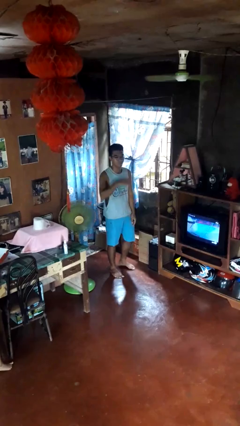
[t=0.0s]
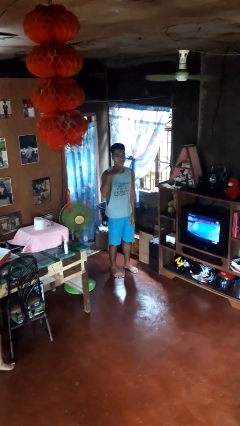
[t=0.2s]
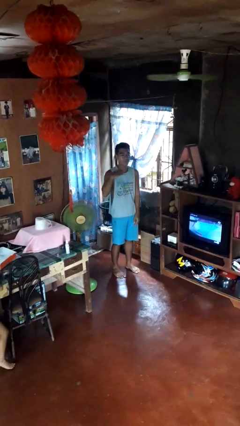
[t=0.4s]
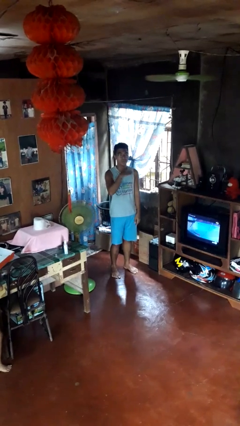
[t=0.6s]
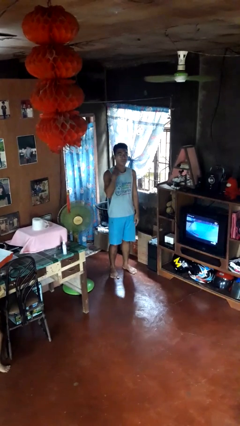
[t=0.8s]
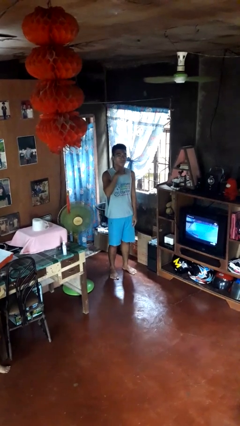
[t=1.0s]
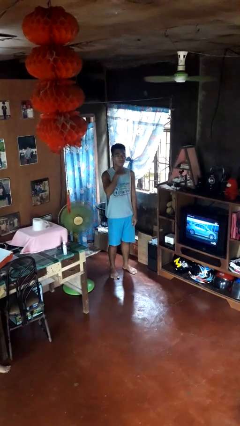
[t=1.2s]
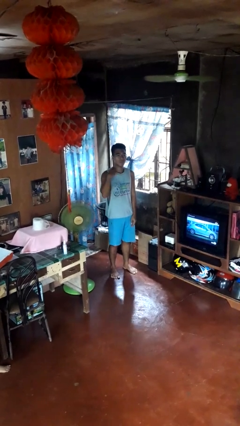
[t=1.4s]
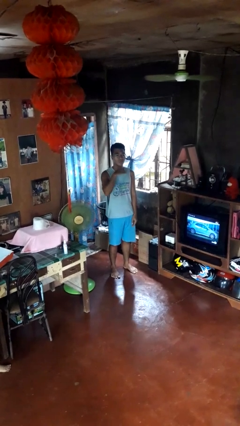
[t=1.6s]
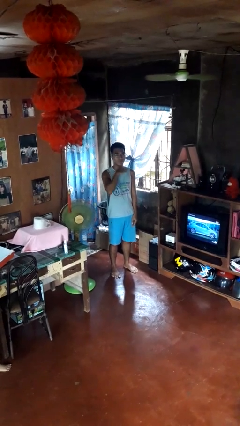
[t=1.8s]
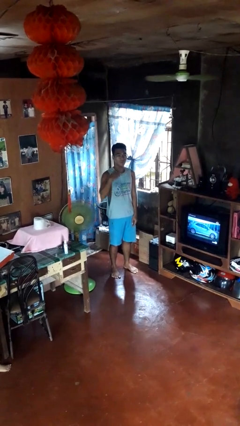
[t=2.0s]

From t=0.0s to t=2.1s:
person gestures cut

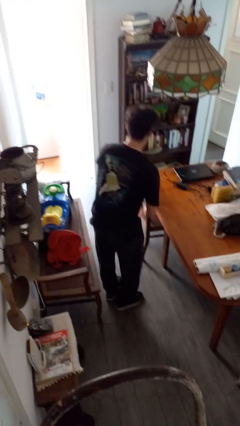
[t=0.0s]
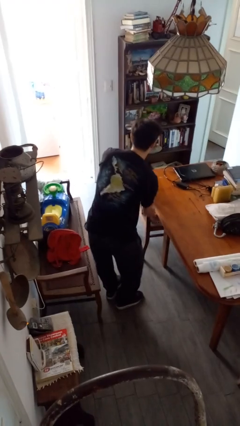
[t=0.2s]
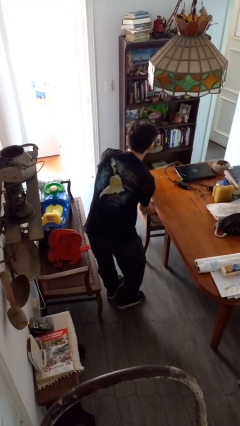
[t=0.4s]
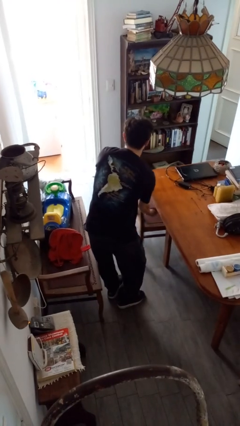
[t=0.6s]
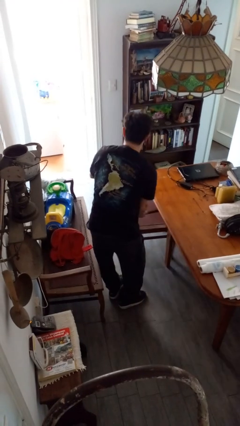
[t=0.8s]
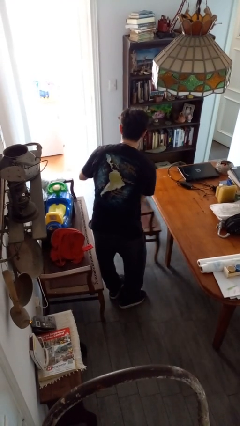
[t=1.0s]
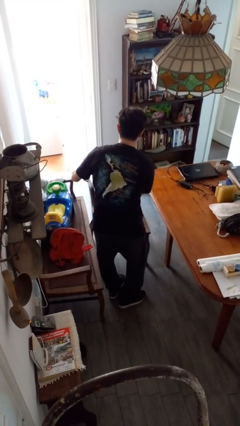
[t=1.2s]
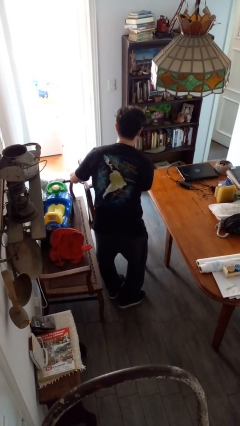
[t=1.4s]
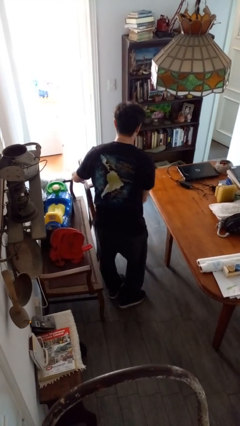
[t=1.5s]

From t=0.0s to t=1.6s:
person pulls out chair

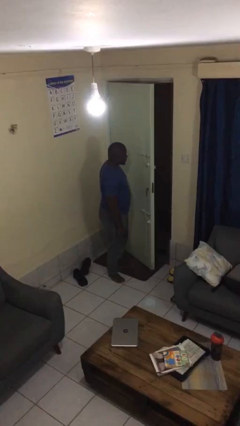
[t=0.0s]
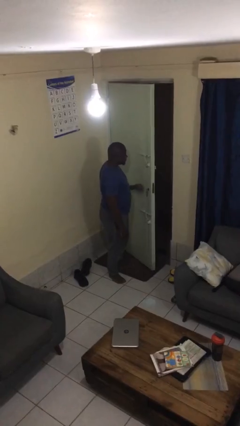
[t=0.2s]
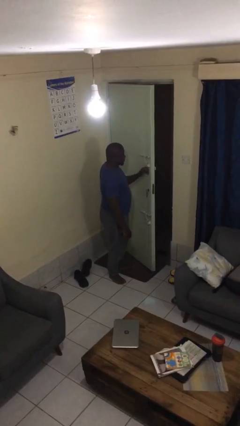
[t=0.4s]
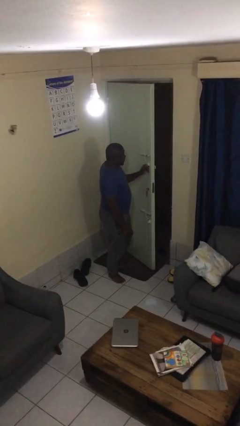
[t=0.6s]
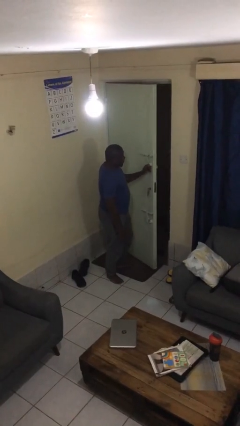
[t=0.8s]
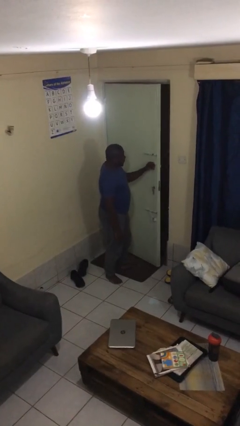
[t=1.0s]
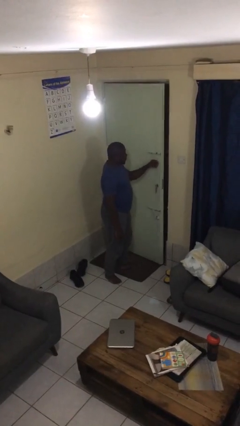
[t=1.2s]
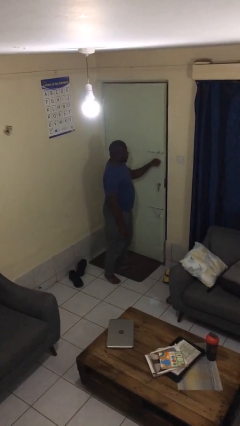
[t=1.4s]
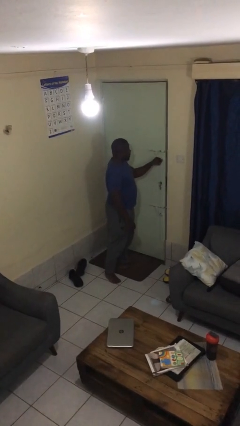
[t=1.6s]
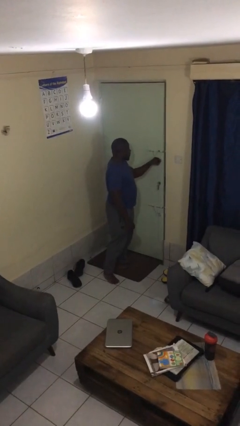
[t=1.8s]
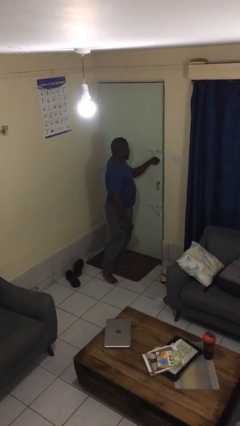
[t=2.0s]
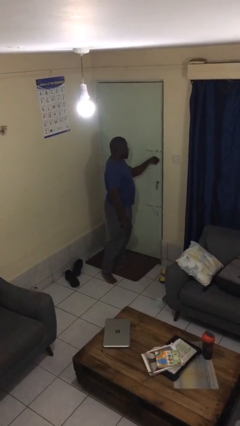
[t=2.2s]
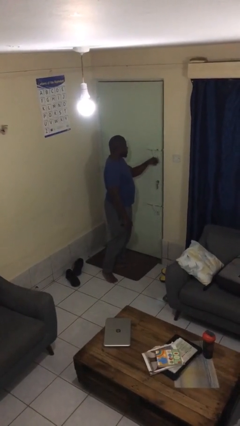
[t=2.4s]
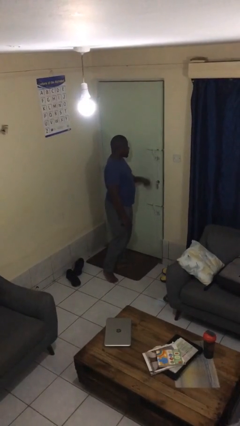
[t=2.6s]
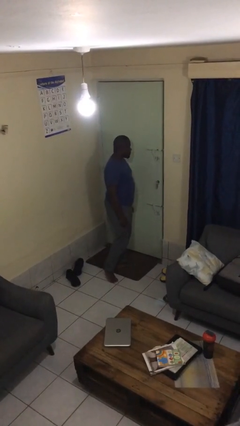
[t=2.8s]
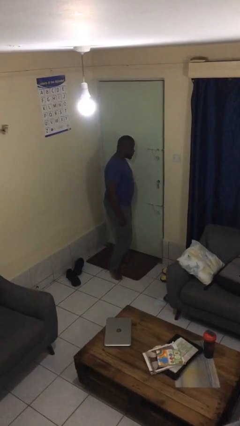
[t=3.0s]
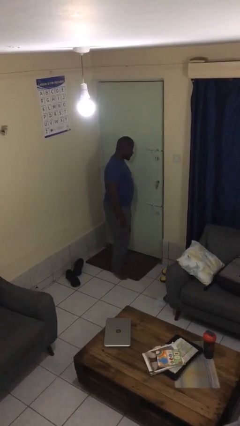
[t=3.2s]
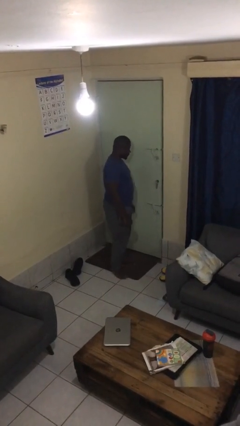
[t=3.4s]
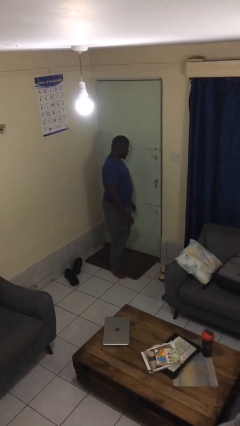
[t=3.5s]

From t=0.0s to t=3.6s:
person closes facility door

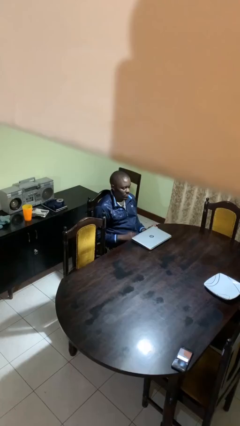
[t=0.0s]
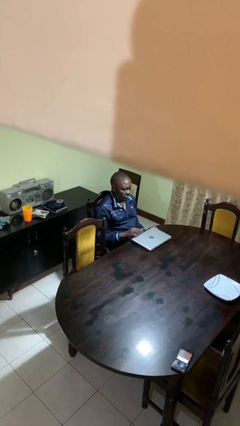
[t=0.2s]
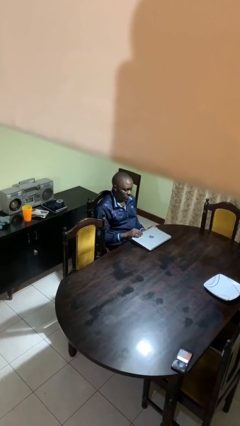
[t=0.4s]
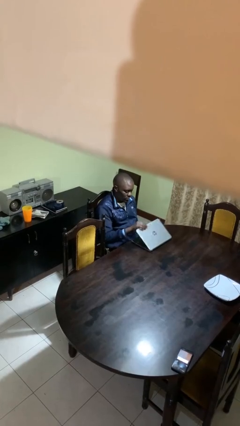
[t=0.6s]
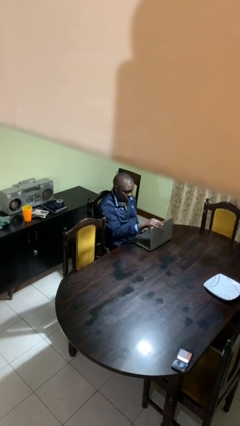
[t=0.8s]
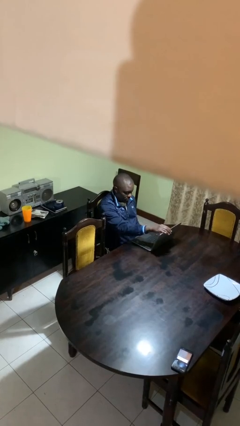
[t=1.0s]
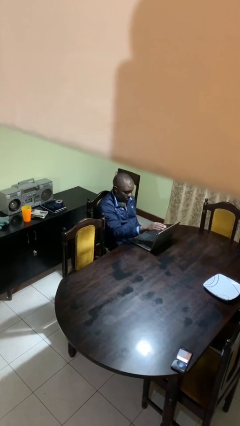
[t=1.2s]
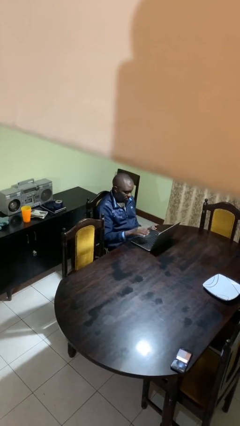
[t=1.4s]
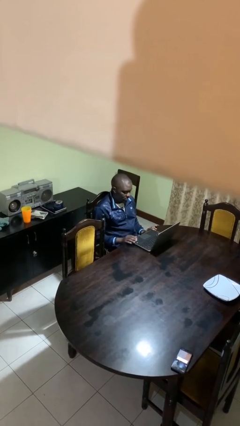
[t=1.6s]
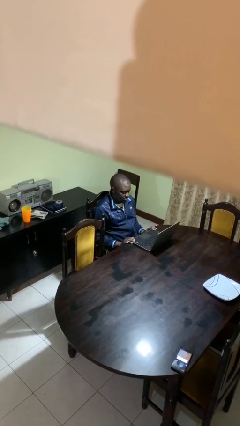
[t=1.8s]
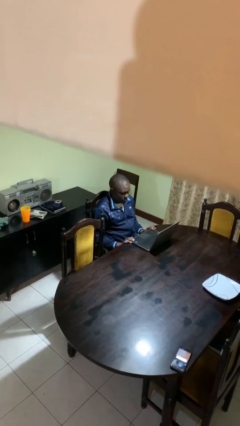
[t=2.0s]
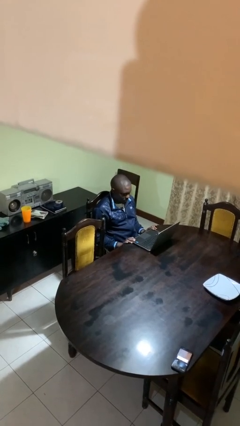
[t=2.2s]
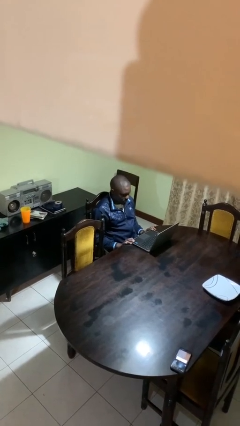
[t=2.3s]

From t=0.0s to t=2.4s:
person opens laptop

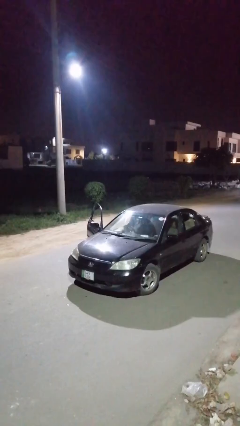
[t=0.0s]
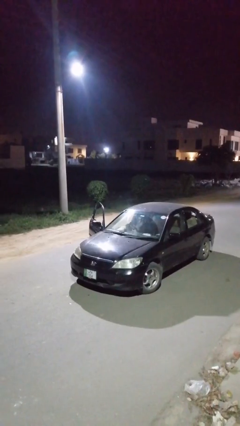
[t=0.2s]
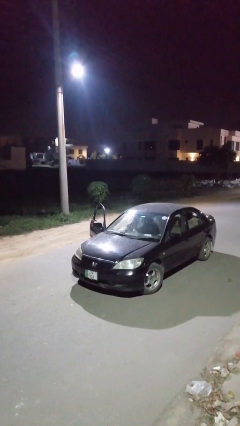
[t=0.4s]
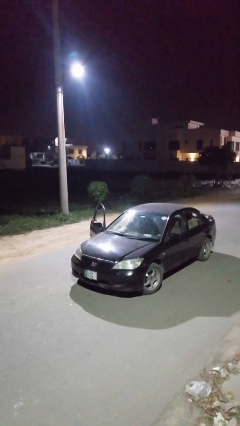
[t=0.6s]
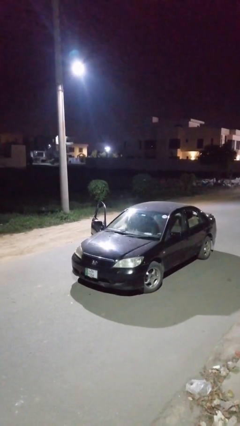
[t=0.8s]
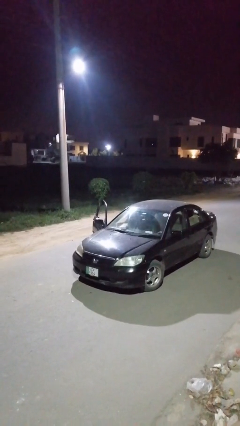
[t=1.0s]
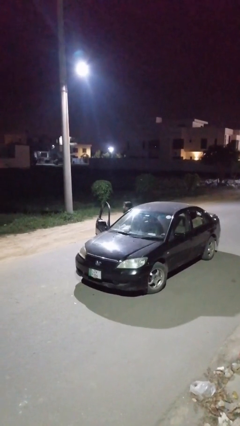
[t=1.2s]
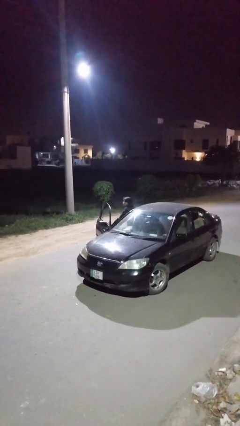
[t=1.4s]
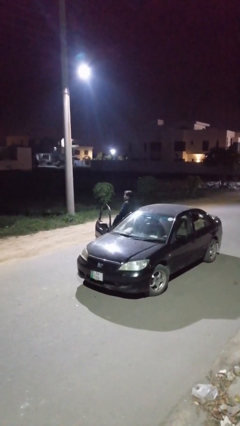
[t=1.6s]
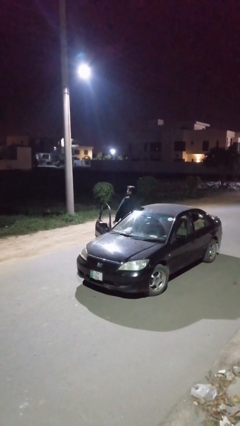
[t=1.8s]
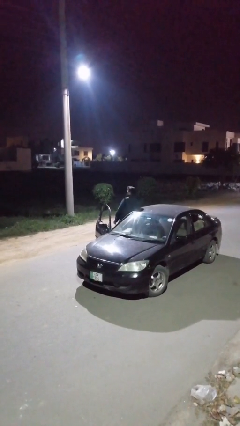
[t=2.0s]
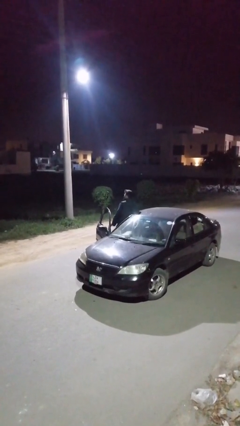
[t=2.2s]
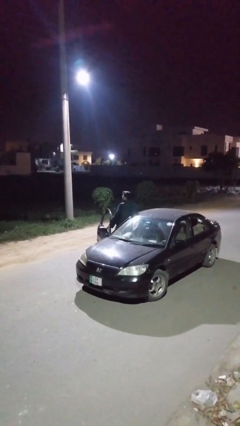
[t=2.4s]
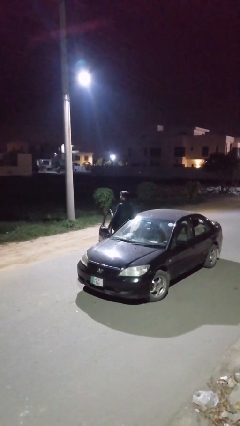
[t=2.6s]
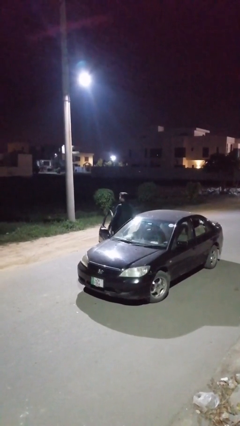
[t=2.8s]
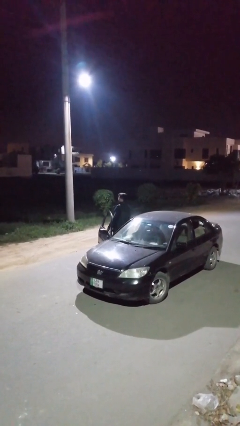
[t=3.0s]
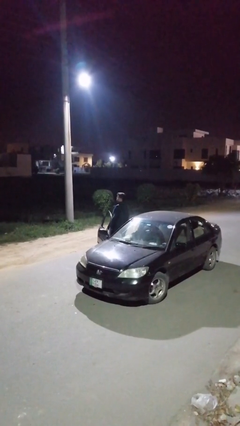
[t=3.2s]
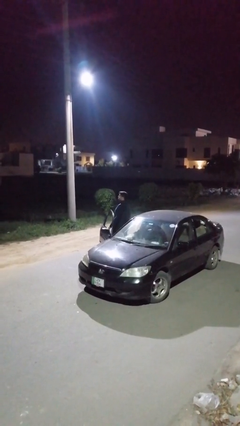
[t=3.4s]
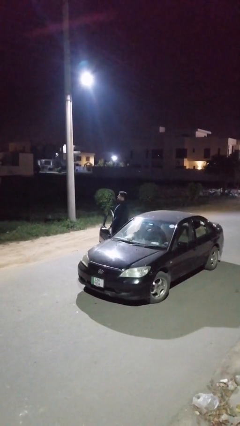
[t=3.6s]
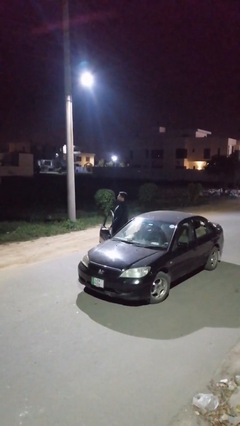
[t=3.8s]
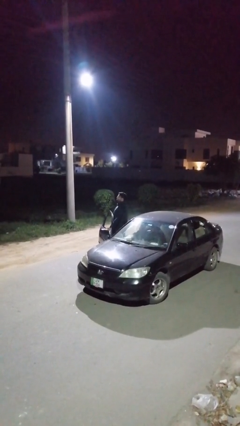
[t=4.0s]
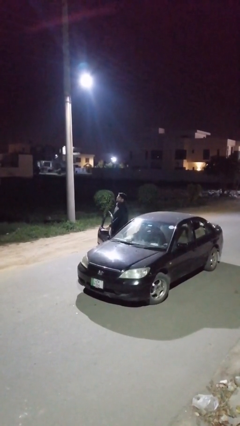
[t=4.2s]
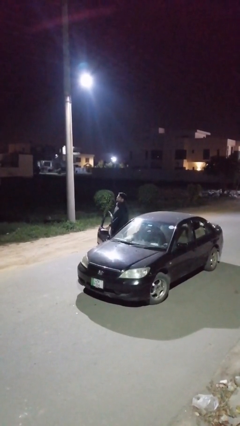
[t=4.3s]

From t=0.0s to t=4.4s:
person exits car

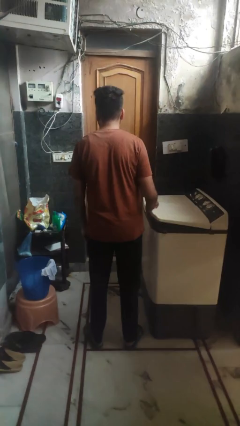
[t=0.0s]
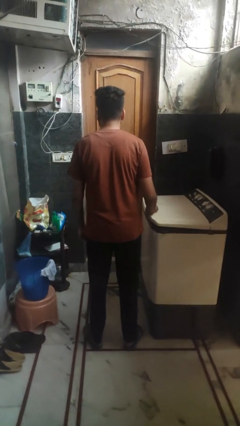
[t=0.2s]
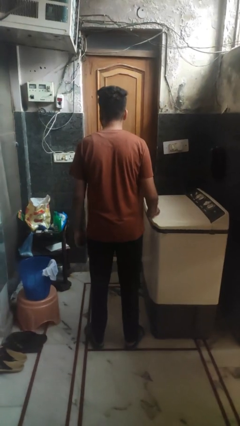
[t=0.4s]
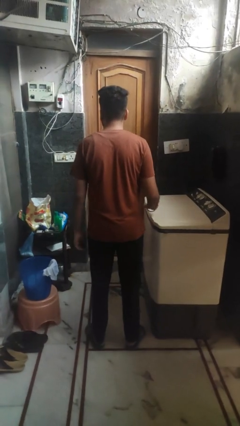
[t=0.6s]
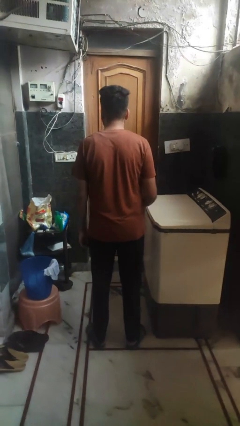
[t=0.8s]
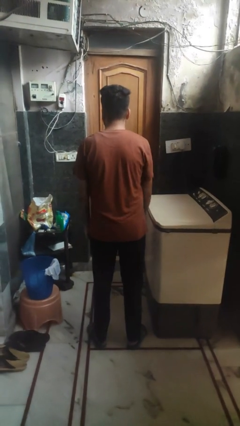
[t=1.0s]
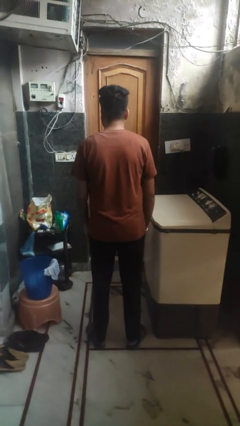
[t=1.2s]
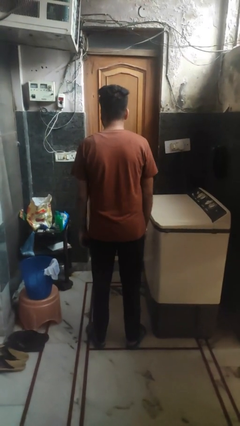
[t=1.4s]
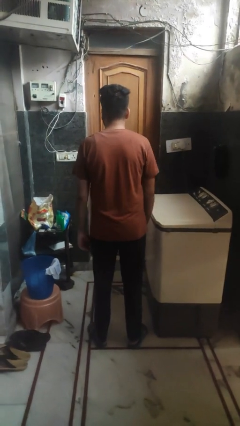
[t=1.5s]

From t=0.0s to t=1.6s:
person closes clothes washer

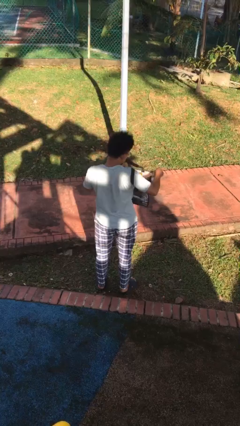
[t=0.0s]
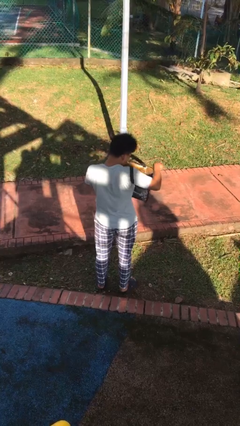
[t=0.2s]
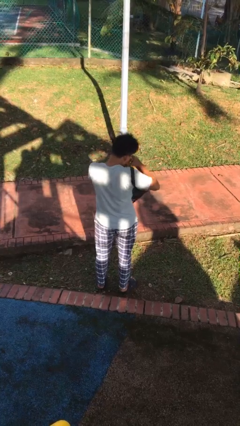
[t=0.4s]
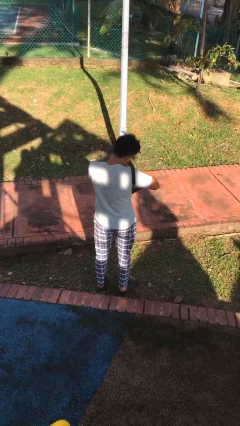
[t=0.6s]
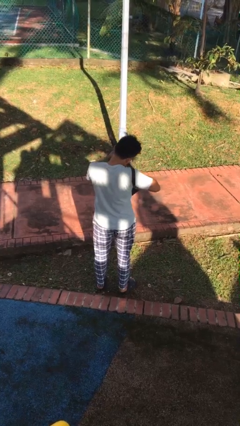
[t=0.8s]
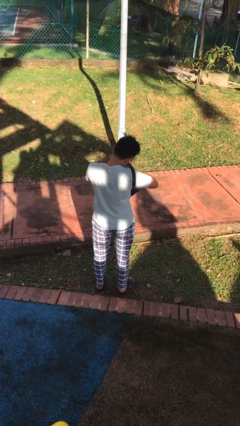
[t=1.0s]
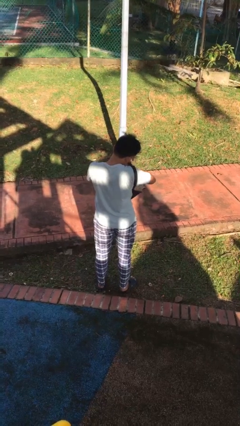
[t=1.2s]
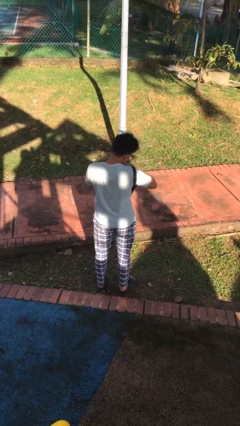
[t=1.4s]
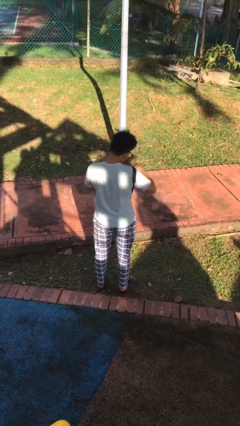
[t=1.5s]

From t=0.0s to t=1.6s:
person searches in bag
